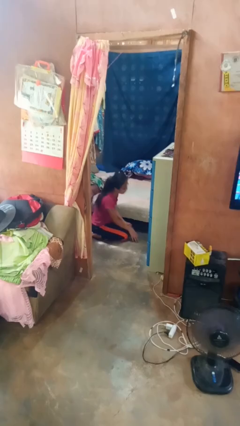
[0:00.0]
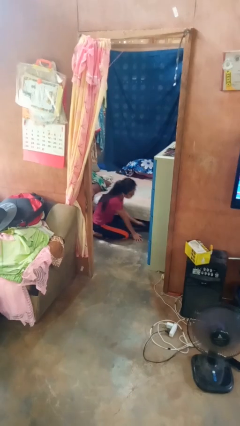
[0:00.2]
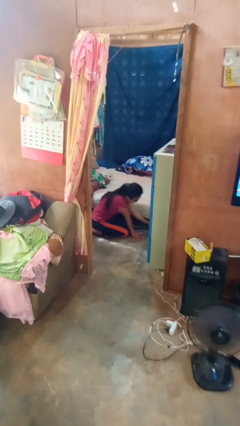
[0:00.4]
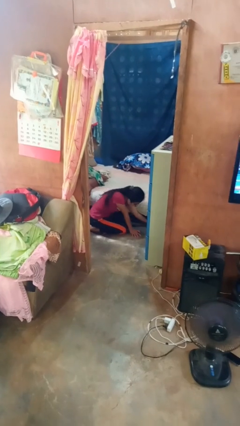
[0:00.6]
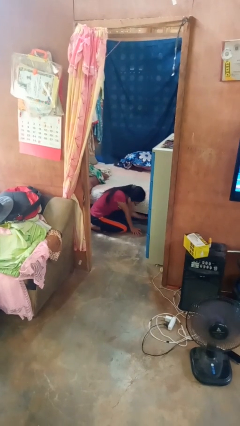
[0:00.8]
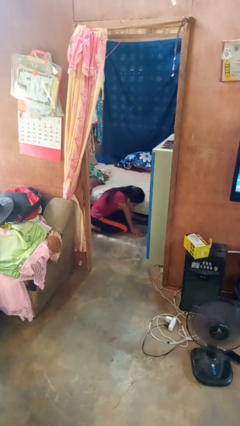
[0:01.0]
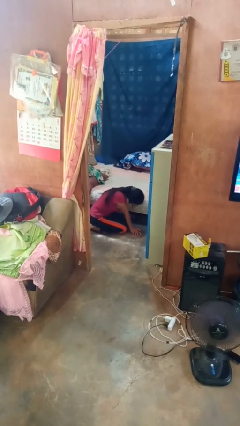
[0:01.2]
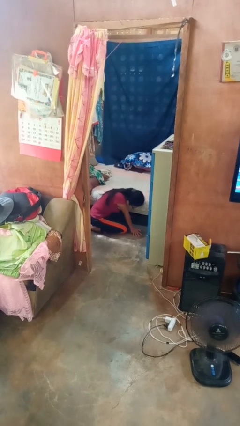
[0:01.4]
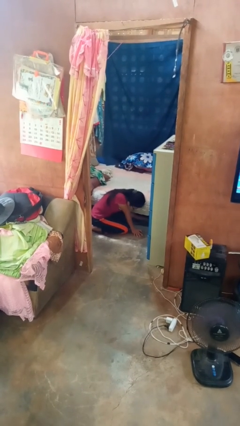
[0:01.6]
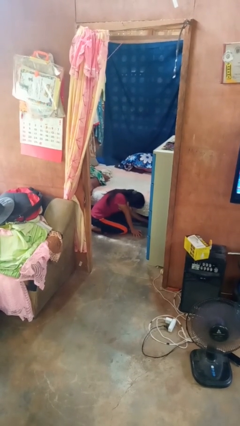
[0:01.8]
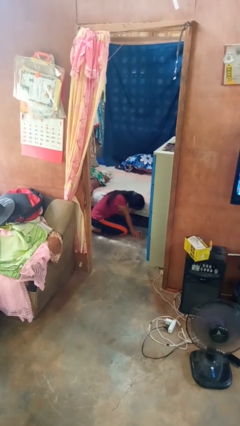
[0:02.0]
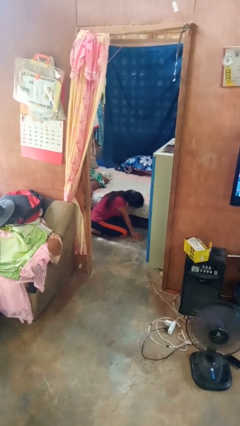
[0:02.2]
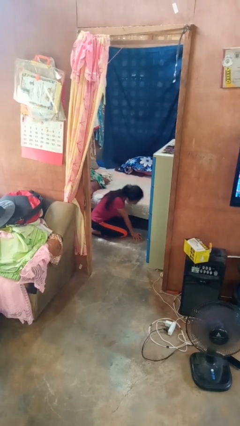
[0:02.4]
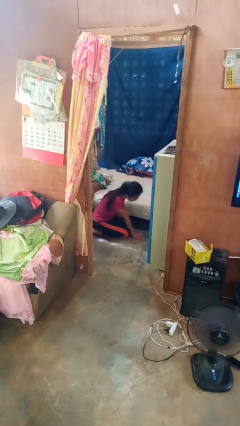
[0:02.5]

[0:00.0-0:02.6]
person searches under bed

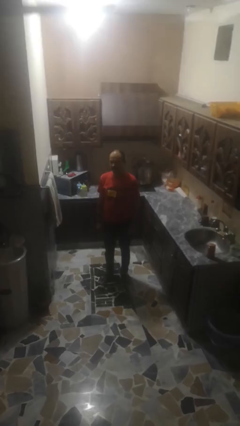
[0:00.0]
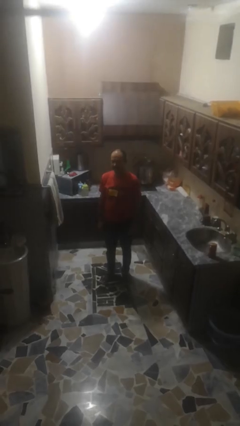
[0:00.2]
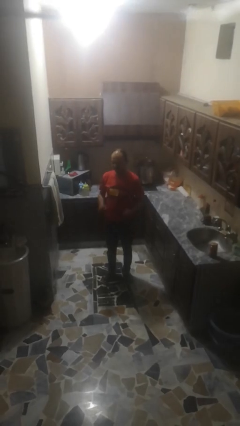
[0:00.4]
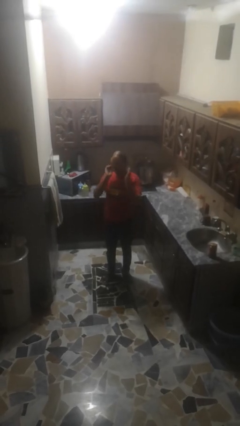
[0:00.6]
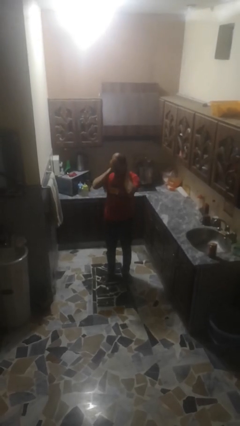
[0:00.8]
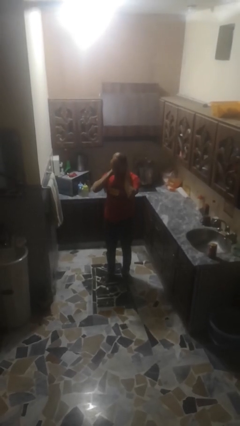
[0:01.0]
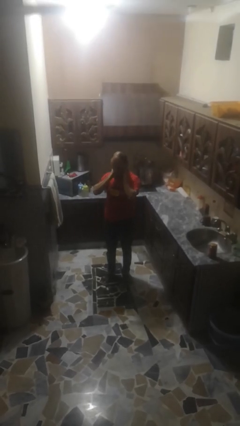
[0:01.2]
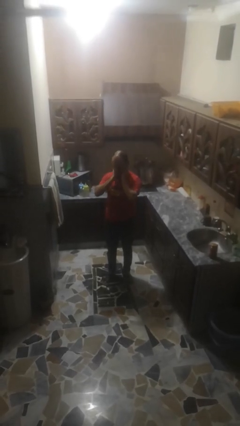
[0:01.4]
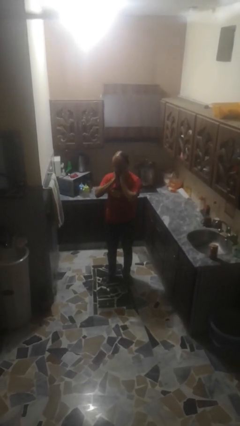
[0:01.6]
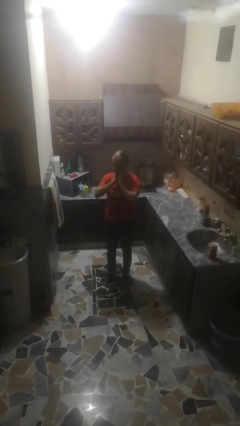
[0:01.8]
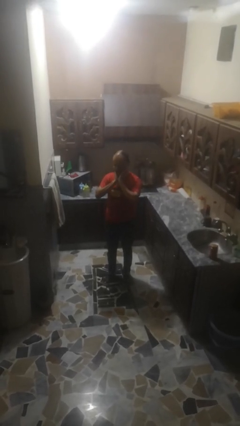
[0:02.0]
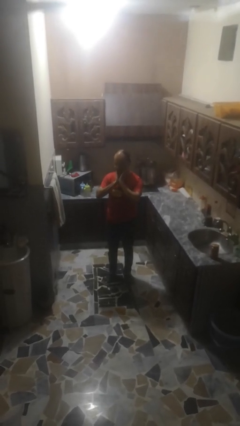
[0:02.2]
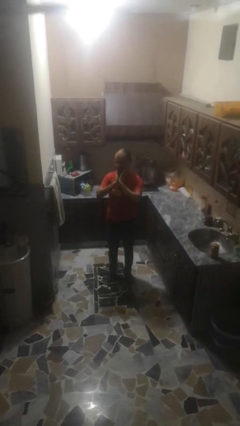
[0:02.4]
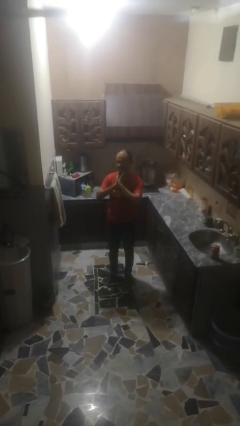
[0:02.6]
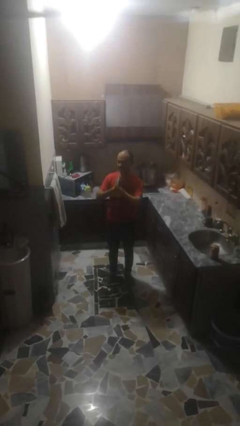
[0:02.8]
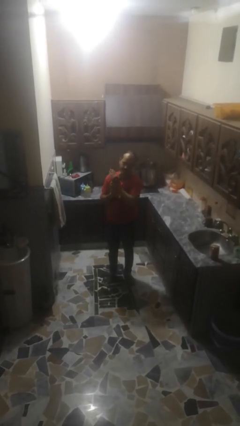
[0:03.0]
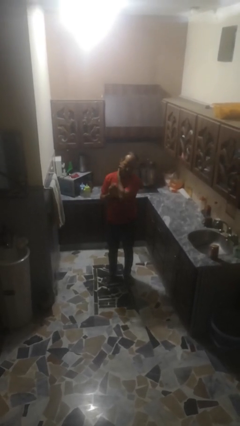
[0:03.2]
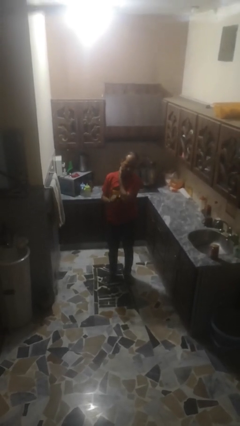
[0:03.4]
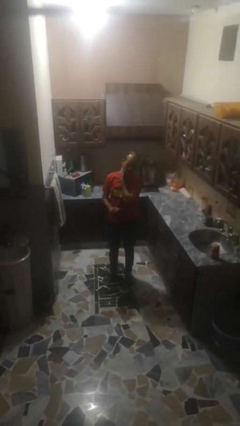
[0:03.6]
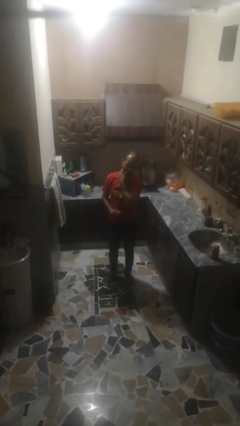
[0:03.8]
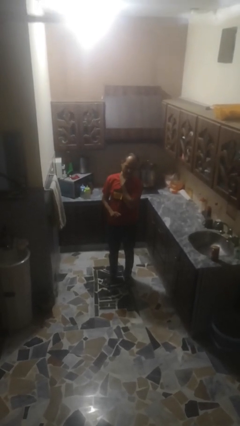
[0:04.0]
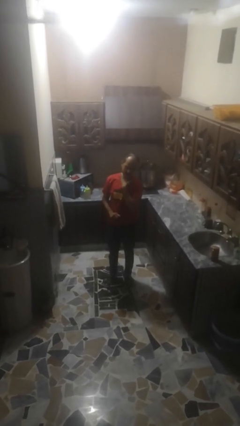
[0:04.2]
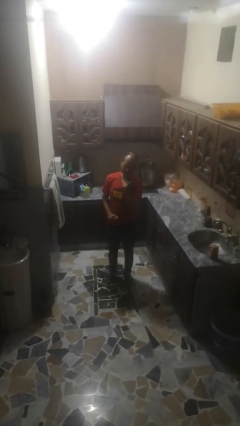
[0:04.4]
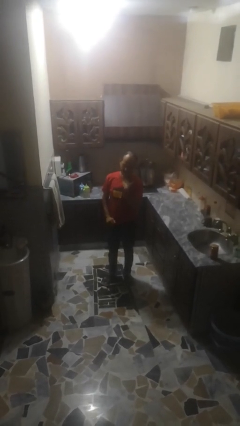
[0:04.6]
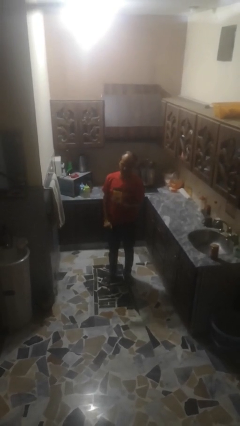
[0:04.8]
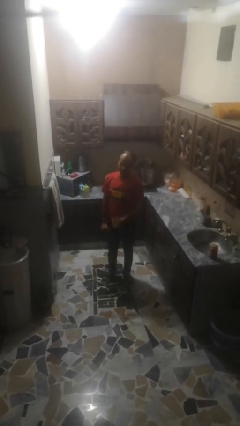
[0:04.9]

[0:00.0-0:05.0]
person rubs neck

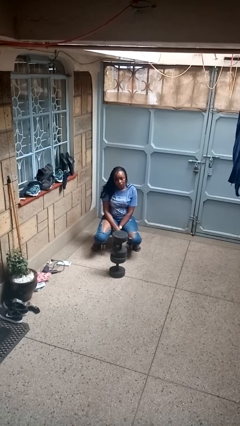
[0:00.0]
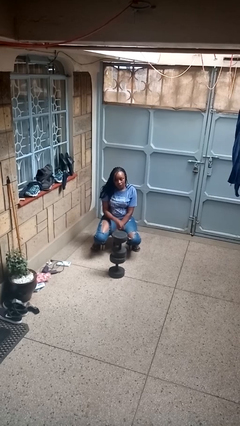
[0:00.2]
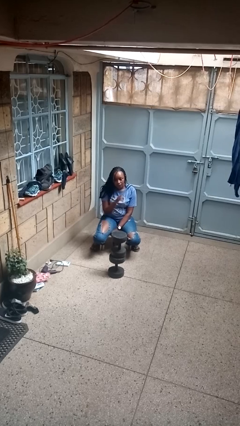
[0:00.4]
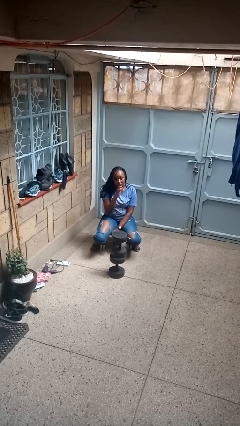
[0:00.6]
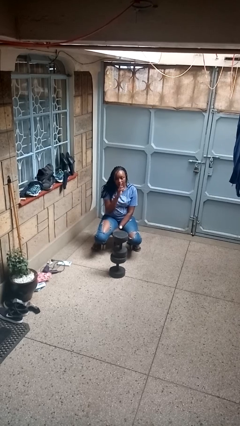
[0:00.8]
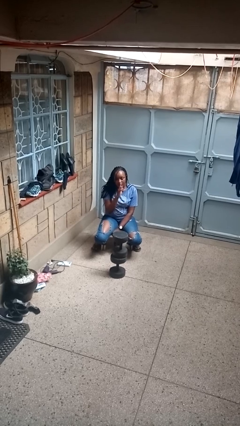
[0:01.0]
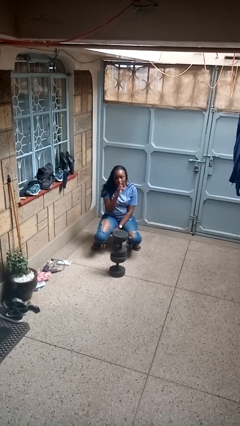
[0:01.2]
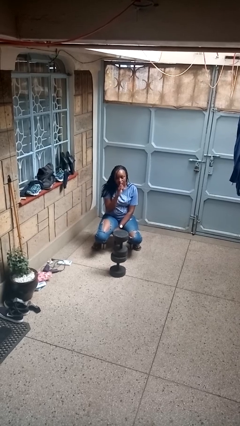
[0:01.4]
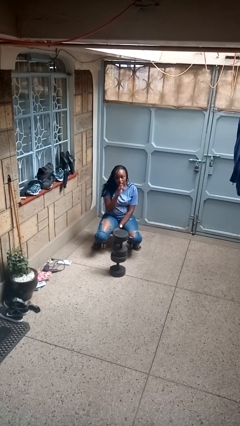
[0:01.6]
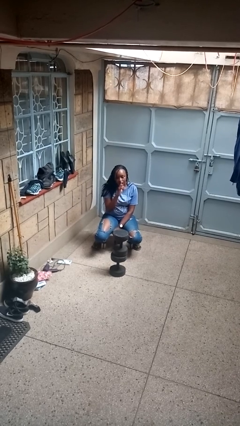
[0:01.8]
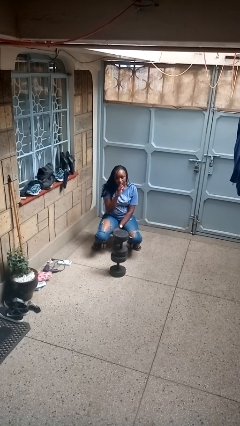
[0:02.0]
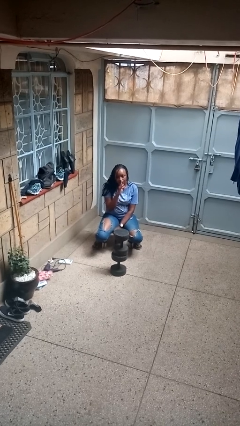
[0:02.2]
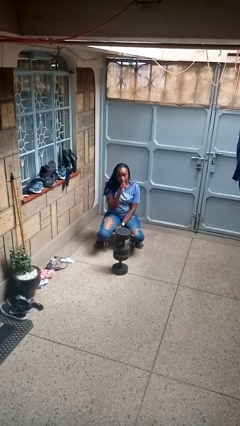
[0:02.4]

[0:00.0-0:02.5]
person gestures be quiet

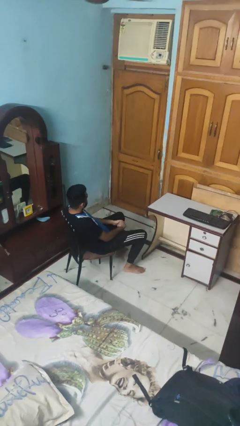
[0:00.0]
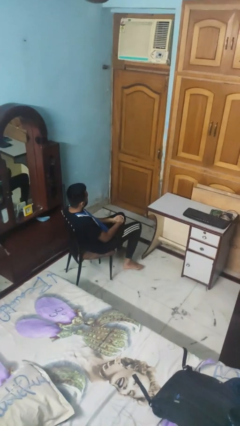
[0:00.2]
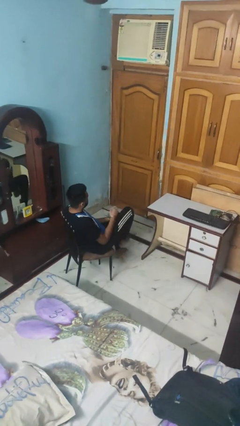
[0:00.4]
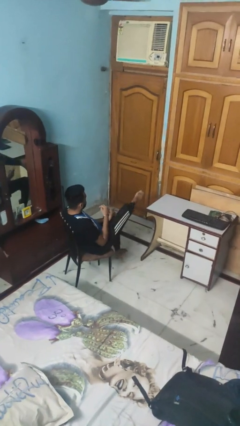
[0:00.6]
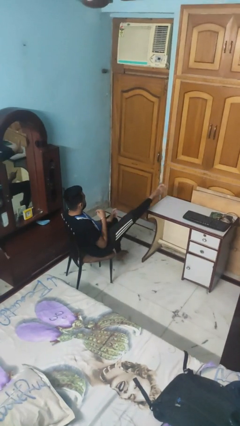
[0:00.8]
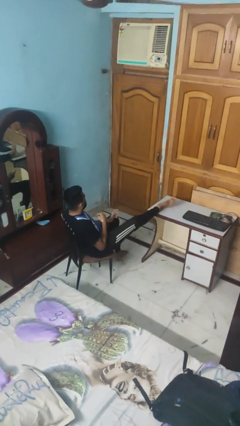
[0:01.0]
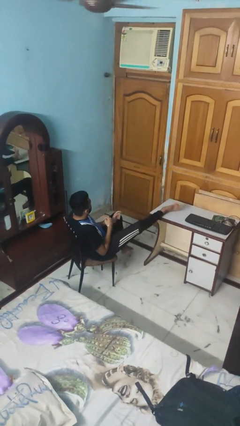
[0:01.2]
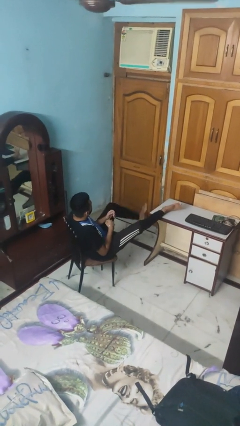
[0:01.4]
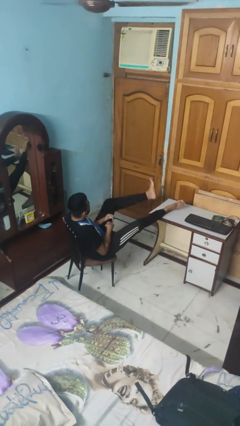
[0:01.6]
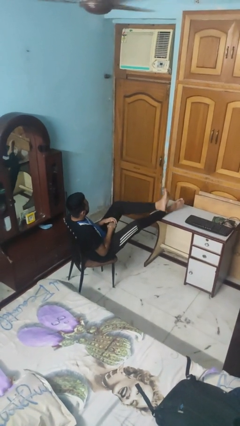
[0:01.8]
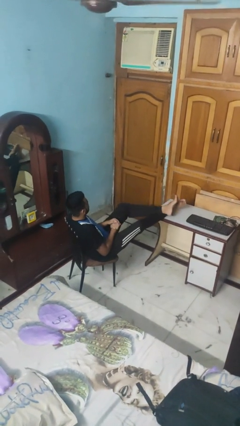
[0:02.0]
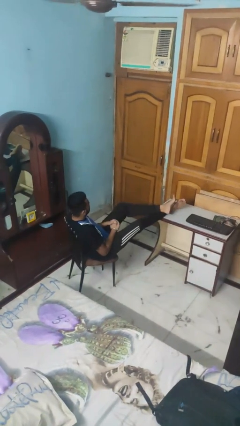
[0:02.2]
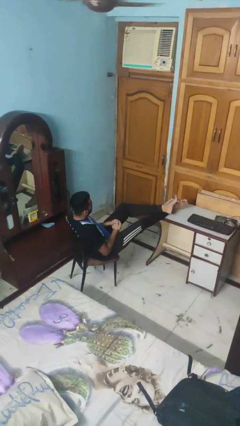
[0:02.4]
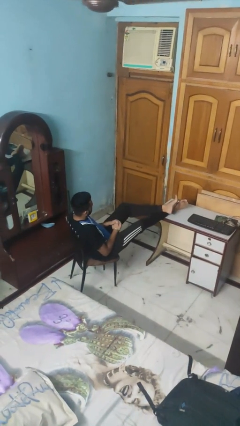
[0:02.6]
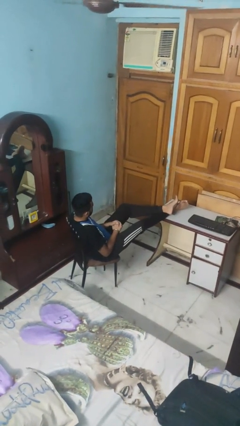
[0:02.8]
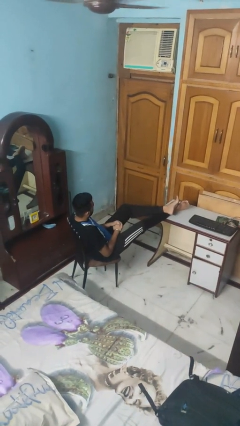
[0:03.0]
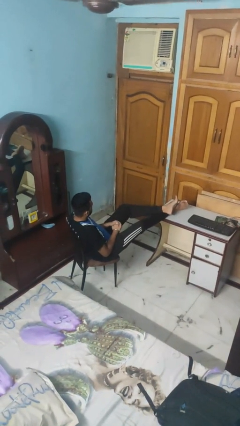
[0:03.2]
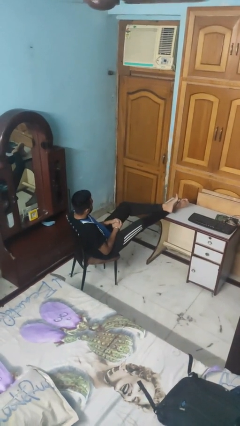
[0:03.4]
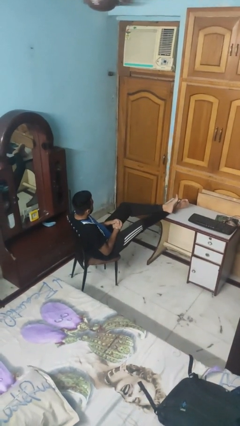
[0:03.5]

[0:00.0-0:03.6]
person puts feet up

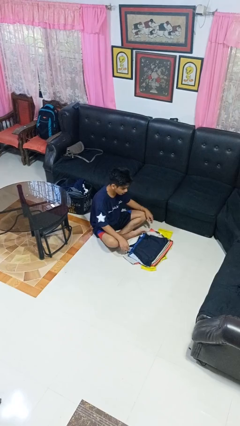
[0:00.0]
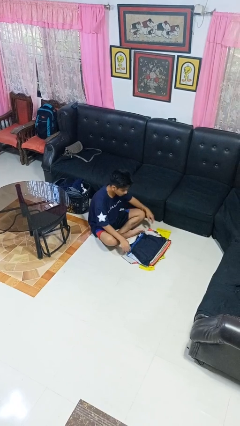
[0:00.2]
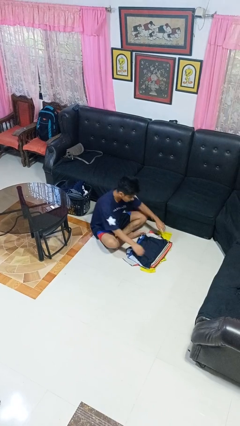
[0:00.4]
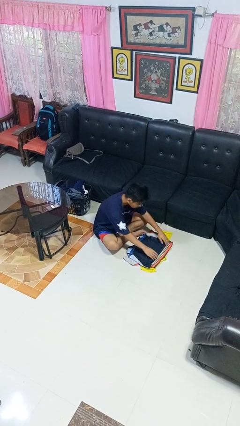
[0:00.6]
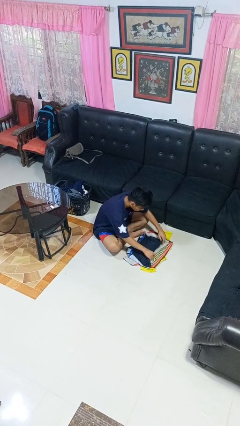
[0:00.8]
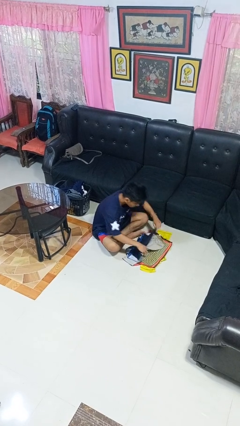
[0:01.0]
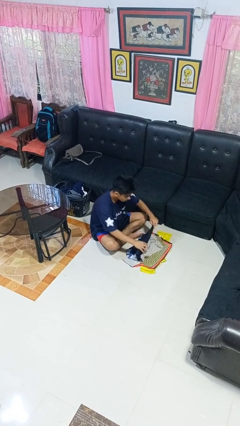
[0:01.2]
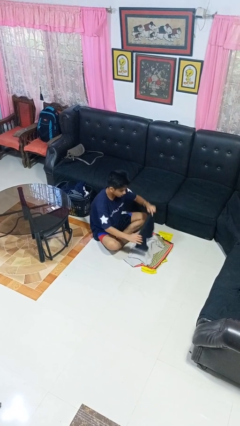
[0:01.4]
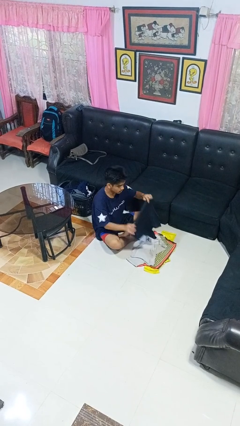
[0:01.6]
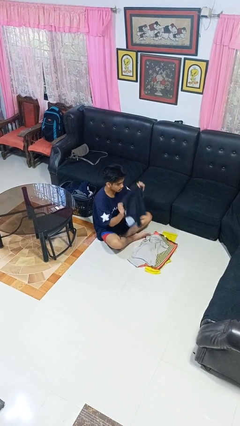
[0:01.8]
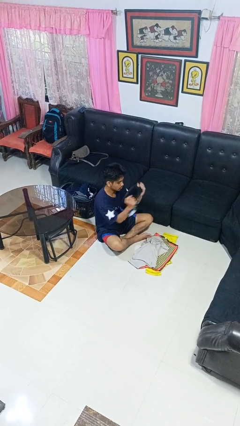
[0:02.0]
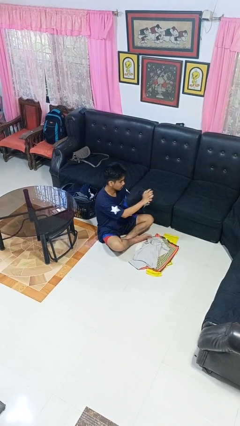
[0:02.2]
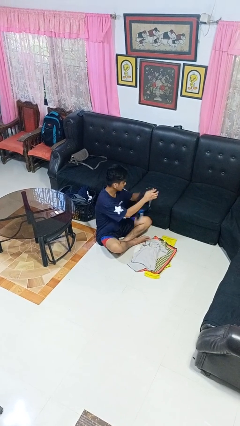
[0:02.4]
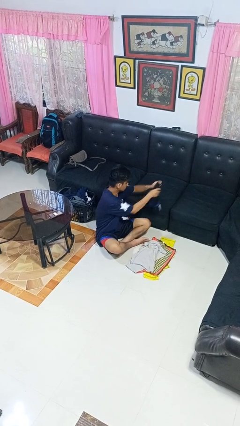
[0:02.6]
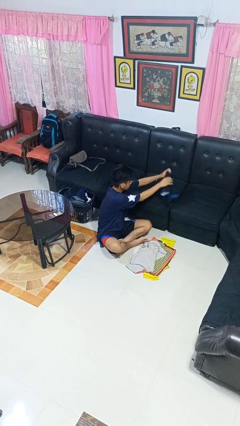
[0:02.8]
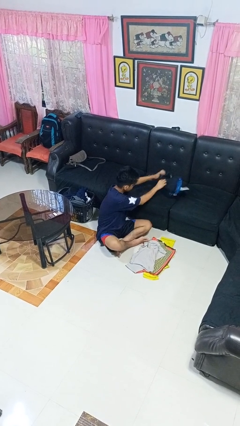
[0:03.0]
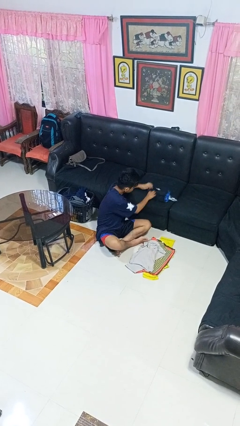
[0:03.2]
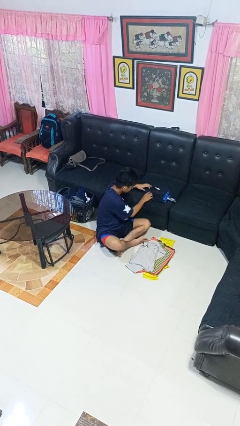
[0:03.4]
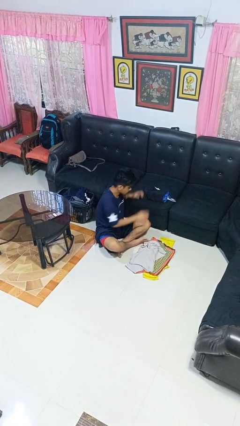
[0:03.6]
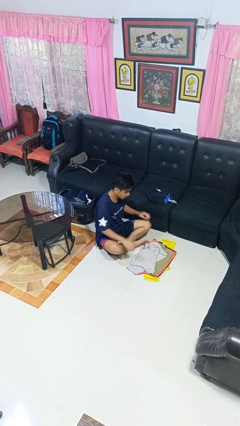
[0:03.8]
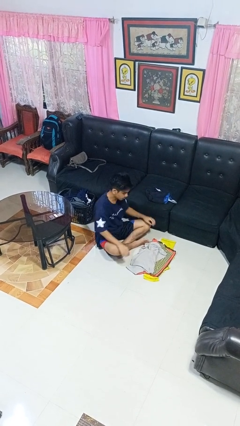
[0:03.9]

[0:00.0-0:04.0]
person folds shirt

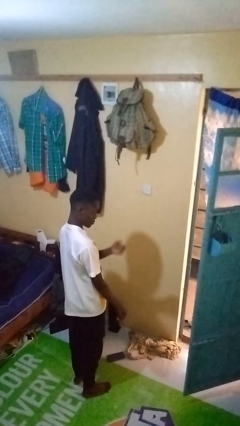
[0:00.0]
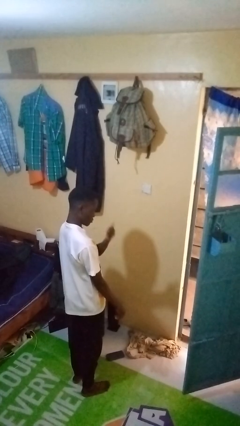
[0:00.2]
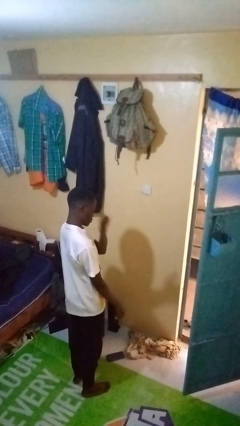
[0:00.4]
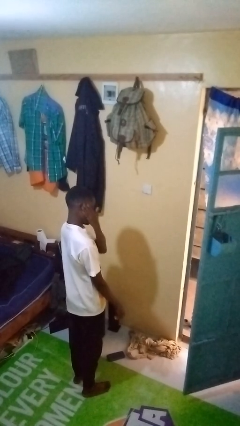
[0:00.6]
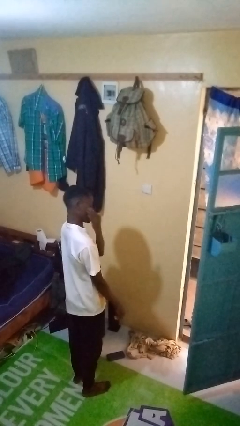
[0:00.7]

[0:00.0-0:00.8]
person swats bug
